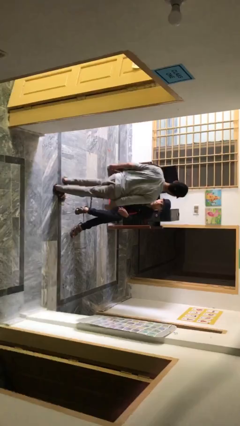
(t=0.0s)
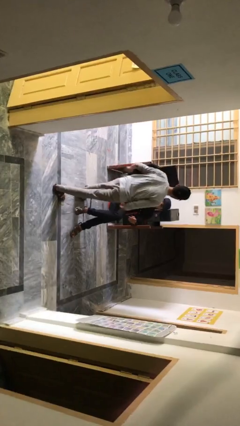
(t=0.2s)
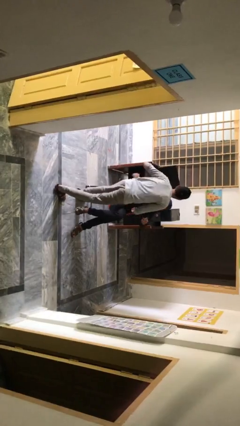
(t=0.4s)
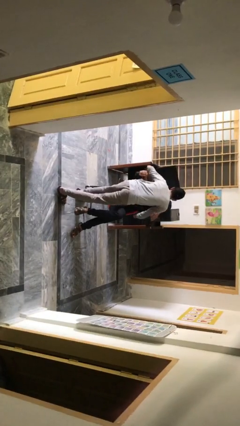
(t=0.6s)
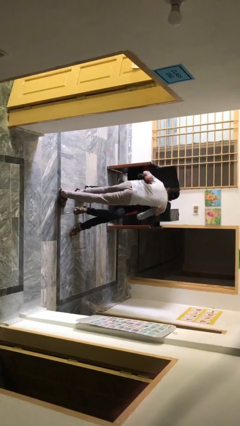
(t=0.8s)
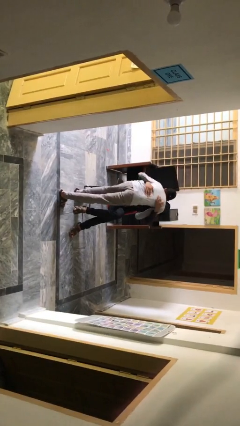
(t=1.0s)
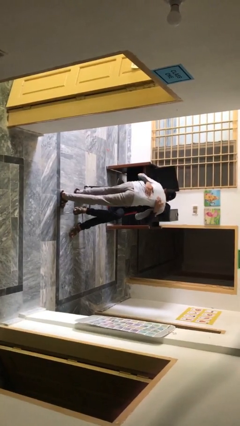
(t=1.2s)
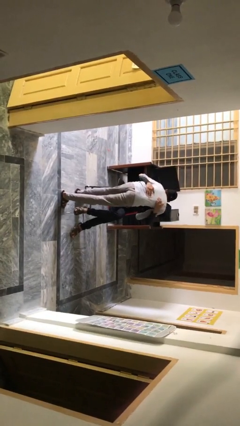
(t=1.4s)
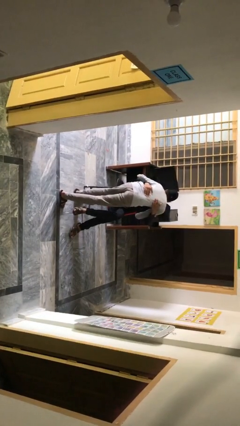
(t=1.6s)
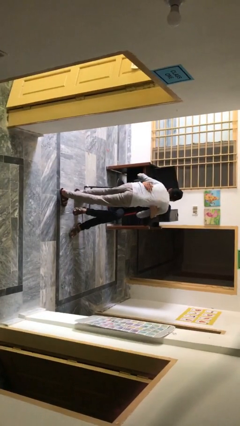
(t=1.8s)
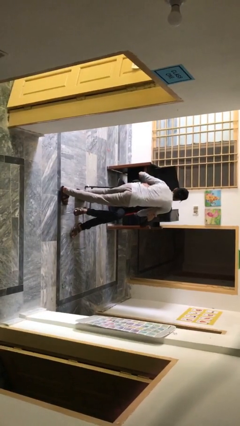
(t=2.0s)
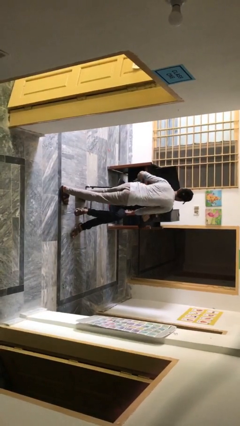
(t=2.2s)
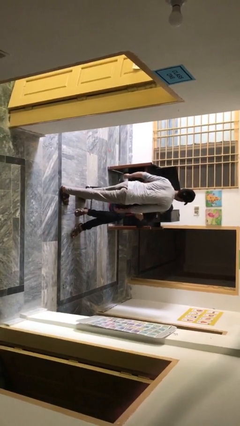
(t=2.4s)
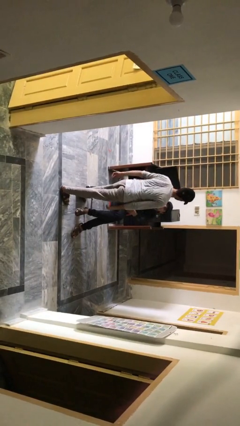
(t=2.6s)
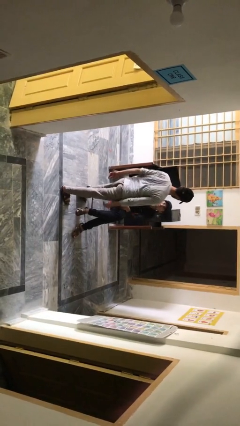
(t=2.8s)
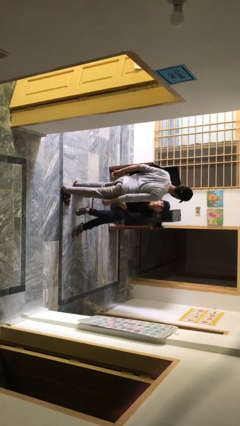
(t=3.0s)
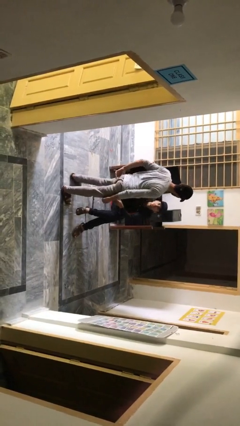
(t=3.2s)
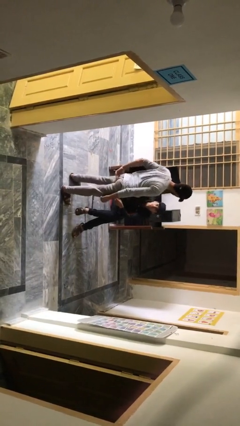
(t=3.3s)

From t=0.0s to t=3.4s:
person embraces person

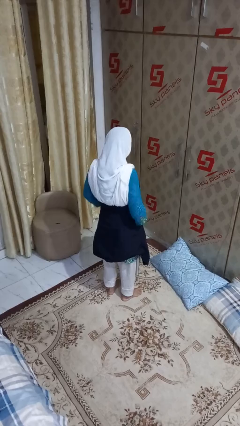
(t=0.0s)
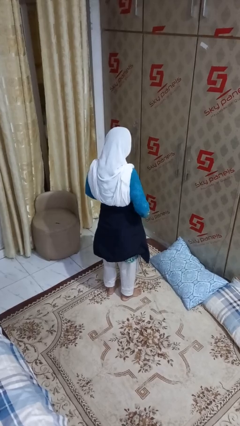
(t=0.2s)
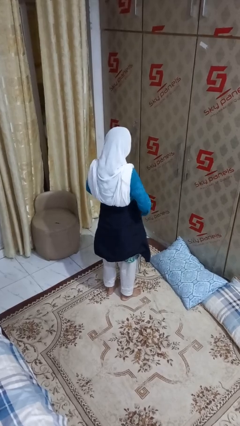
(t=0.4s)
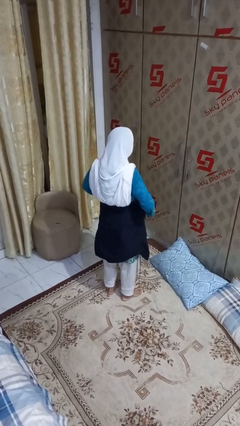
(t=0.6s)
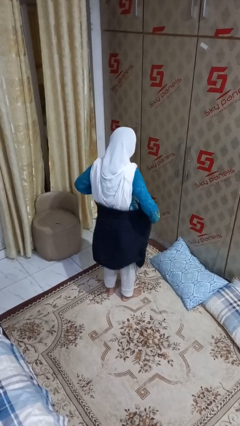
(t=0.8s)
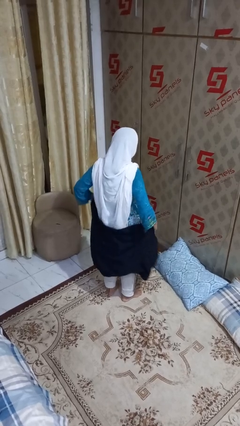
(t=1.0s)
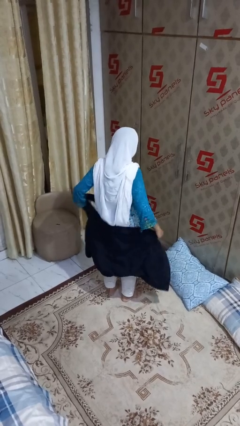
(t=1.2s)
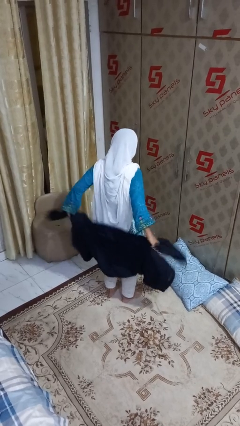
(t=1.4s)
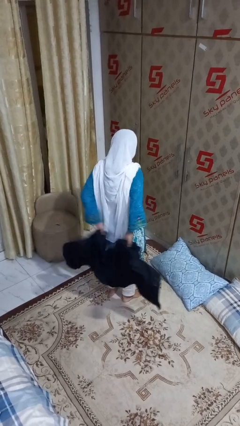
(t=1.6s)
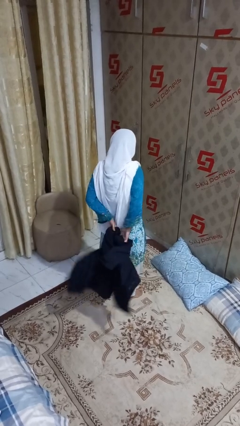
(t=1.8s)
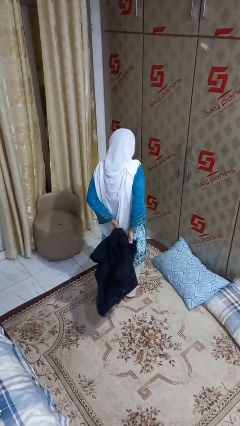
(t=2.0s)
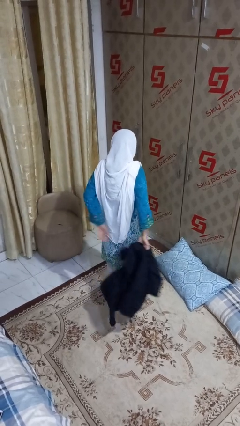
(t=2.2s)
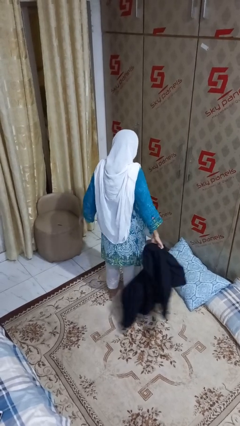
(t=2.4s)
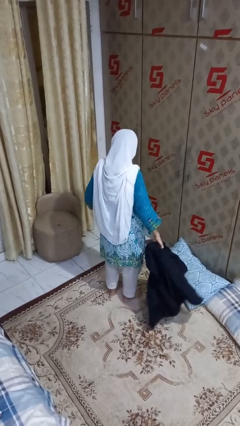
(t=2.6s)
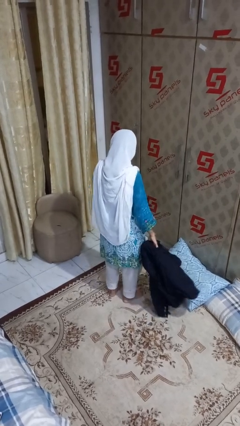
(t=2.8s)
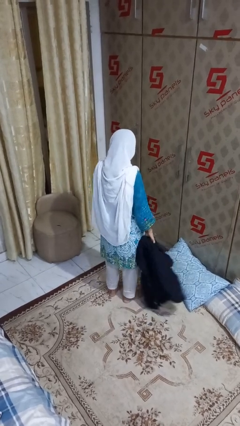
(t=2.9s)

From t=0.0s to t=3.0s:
person unties jacket around waist

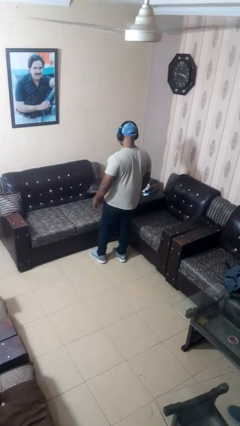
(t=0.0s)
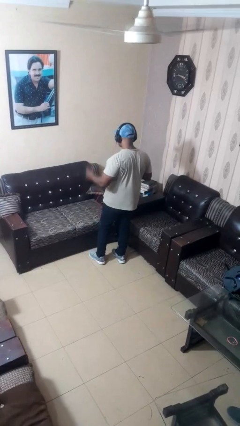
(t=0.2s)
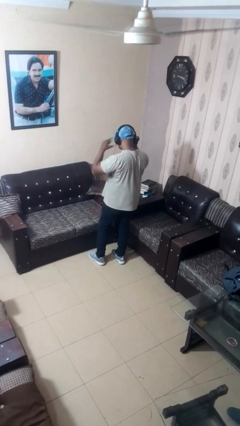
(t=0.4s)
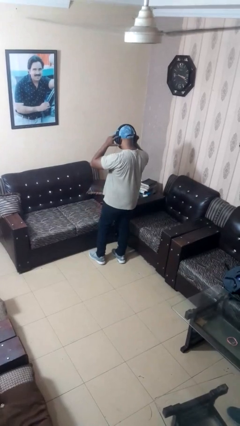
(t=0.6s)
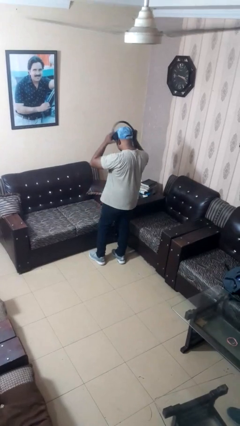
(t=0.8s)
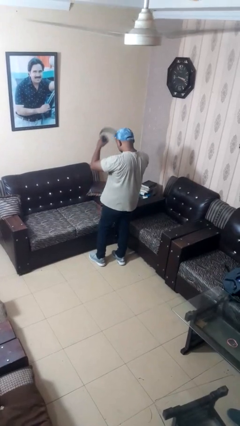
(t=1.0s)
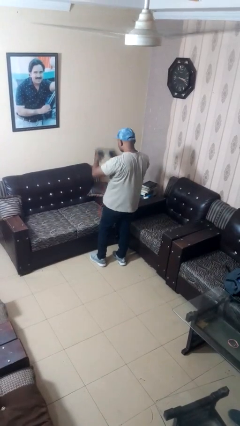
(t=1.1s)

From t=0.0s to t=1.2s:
person takes off headphones

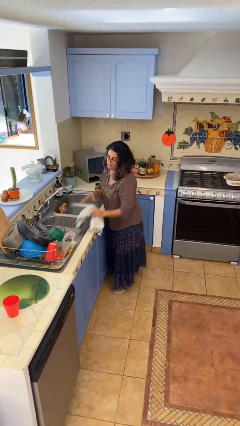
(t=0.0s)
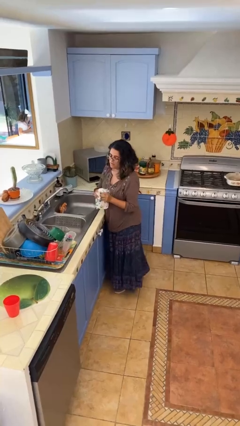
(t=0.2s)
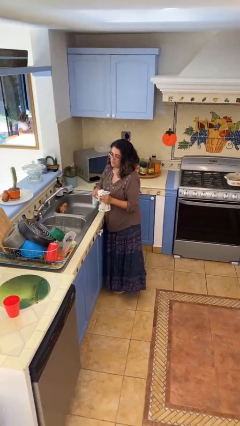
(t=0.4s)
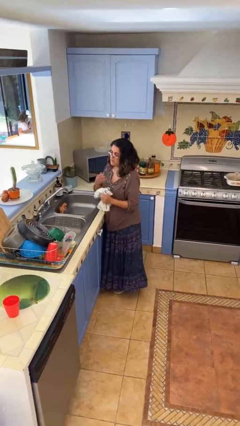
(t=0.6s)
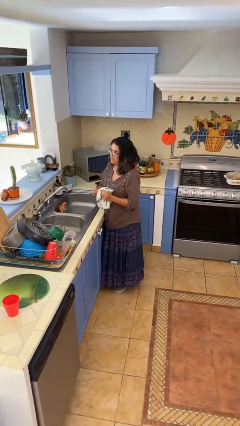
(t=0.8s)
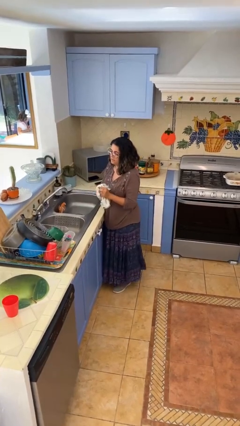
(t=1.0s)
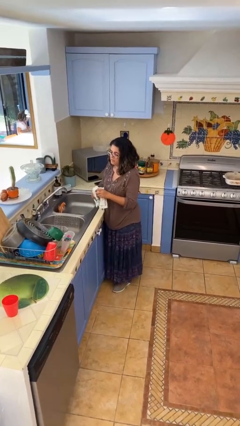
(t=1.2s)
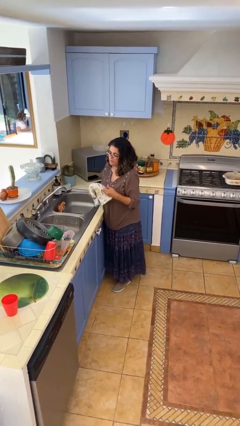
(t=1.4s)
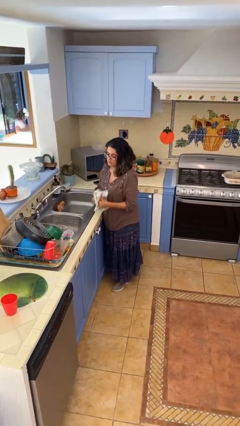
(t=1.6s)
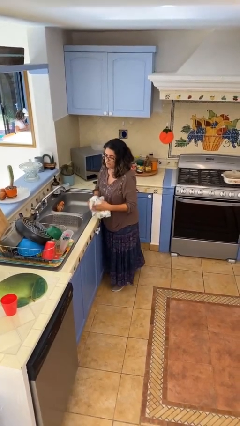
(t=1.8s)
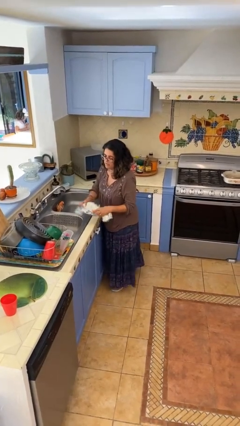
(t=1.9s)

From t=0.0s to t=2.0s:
person dries hands with towel

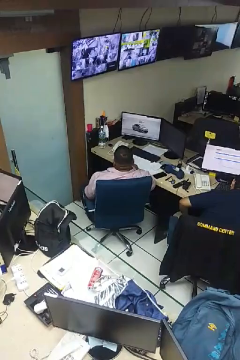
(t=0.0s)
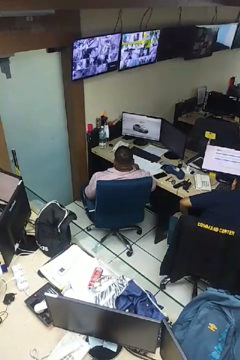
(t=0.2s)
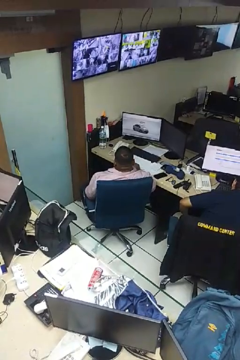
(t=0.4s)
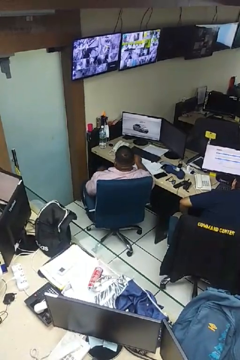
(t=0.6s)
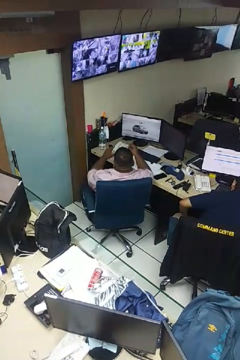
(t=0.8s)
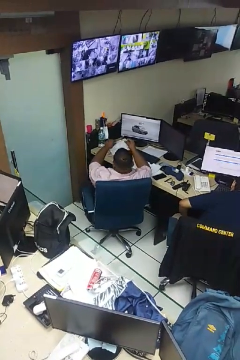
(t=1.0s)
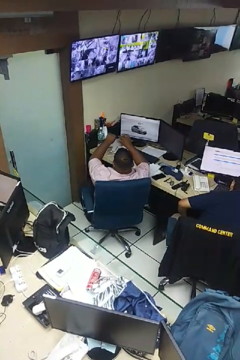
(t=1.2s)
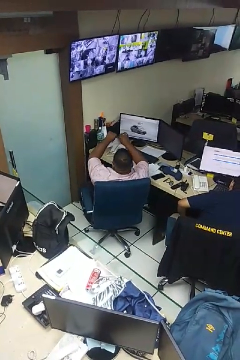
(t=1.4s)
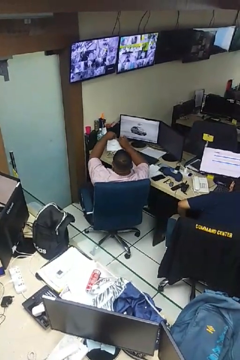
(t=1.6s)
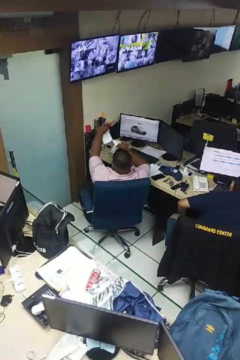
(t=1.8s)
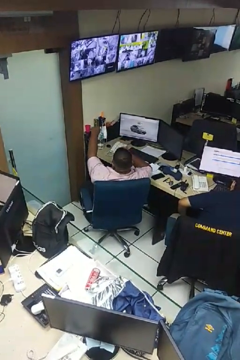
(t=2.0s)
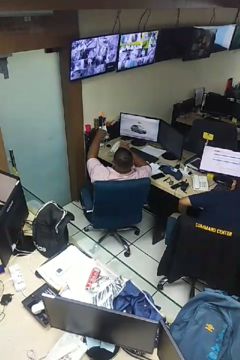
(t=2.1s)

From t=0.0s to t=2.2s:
person tears paper

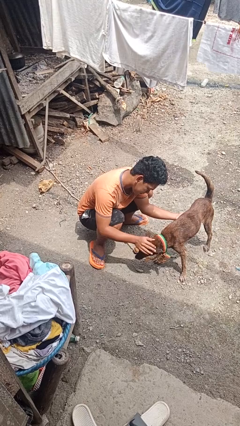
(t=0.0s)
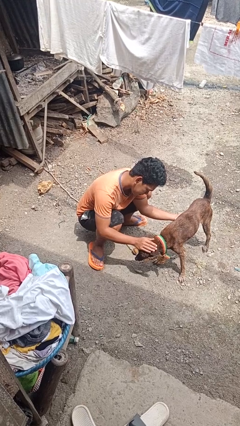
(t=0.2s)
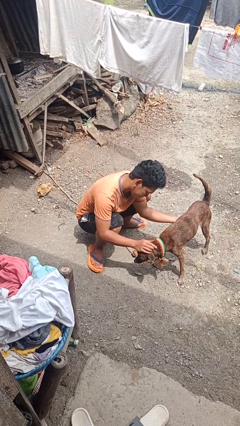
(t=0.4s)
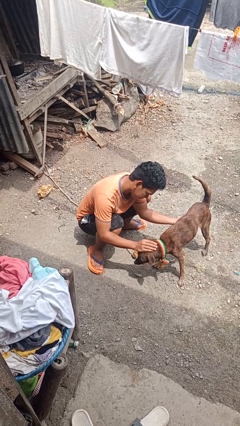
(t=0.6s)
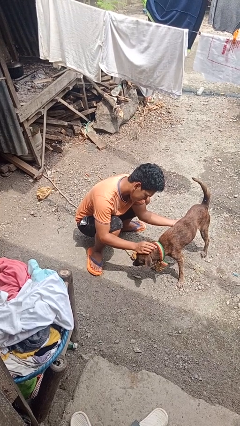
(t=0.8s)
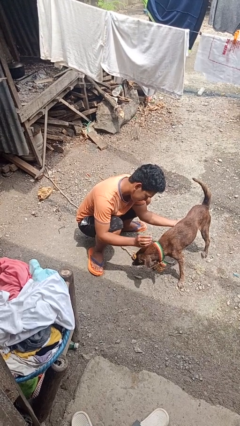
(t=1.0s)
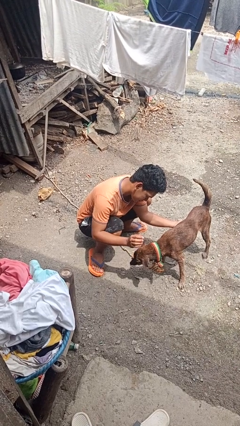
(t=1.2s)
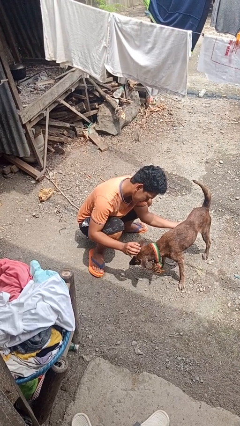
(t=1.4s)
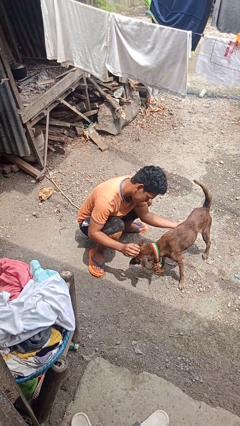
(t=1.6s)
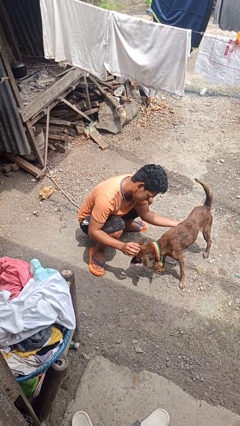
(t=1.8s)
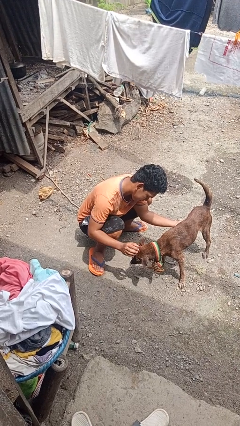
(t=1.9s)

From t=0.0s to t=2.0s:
person pets dog

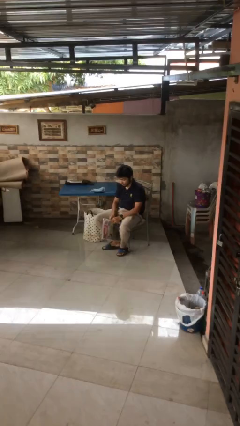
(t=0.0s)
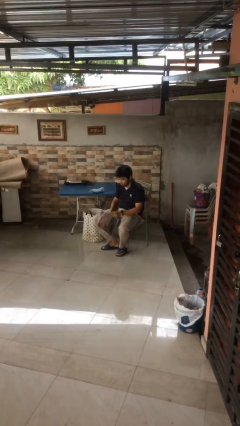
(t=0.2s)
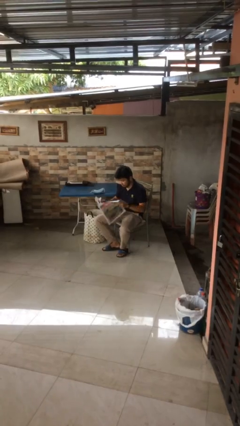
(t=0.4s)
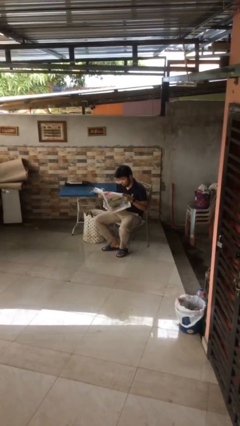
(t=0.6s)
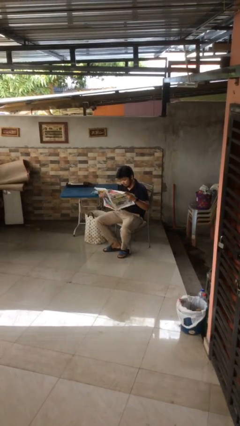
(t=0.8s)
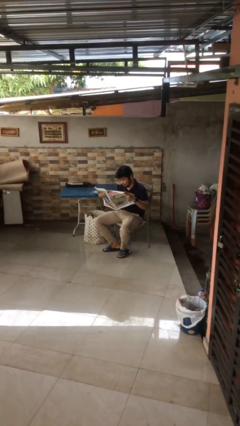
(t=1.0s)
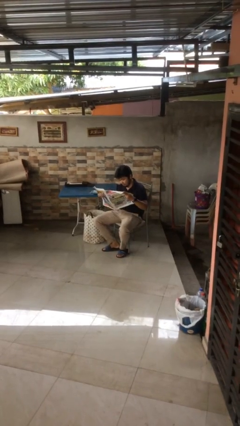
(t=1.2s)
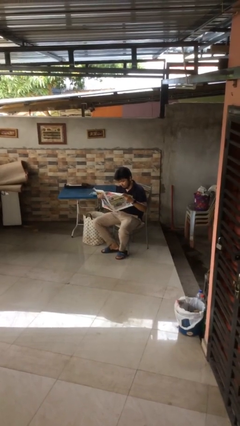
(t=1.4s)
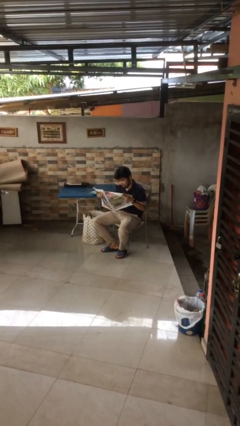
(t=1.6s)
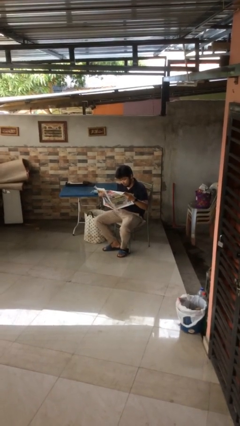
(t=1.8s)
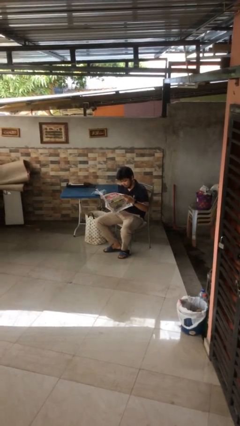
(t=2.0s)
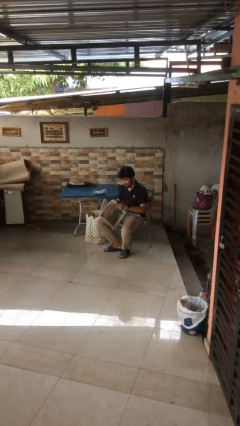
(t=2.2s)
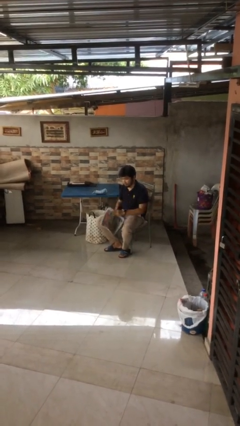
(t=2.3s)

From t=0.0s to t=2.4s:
person reads newspaper

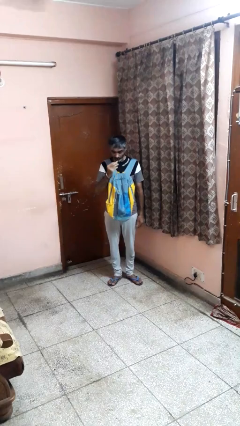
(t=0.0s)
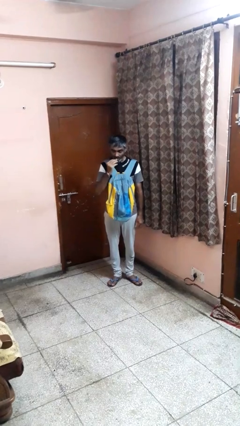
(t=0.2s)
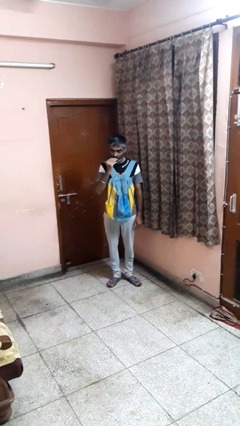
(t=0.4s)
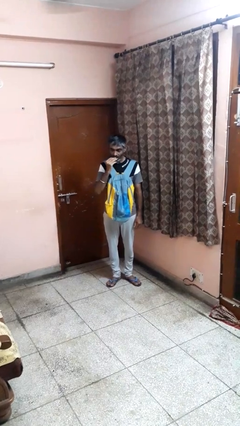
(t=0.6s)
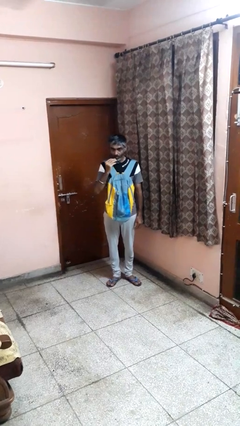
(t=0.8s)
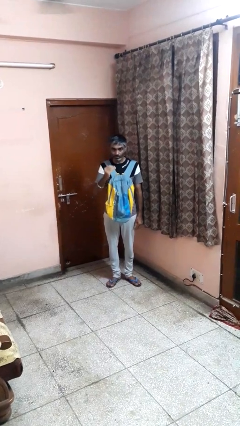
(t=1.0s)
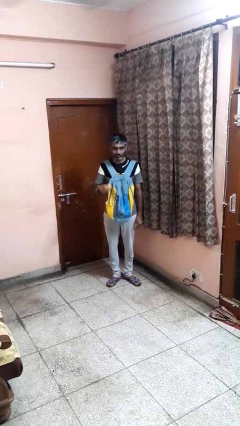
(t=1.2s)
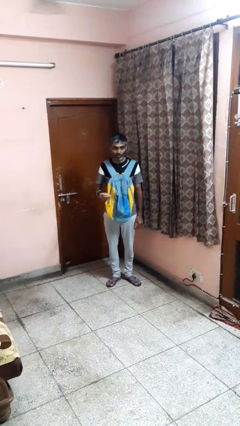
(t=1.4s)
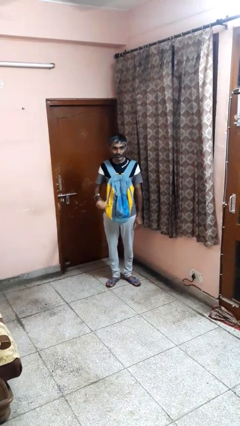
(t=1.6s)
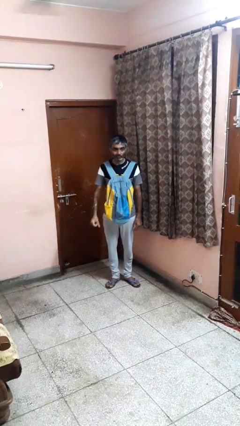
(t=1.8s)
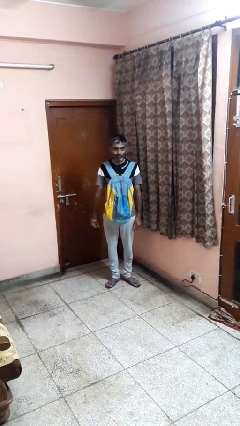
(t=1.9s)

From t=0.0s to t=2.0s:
person eats snack from bag
